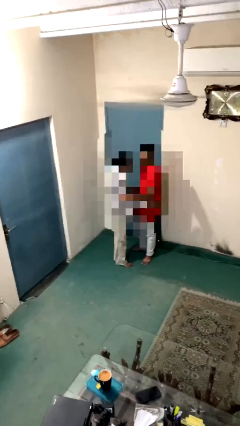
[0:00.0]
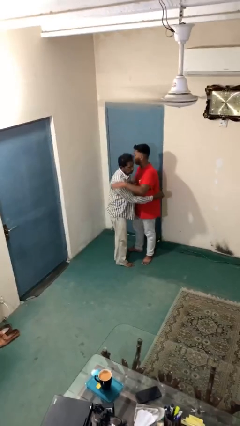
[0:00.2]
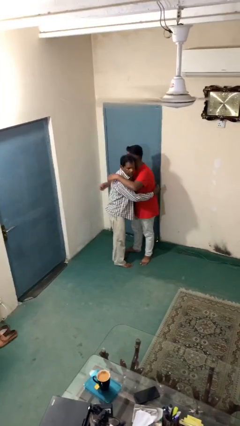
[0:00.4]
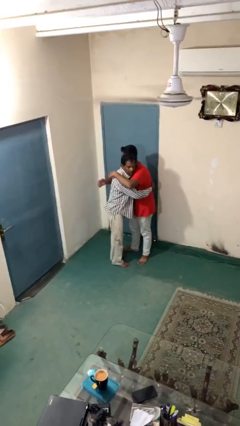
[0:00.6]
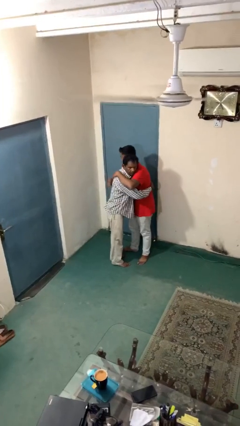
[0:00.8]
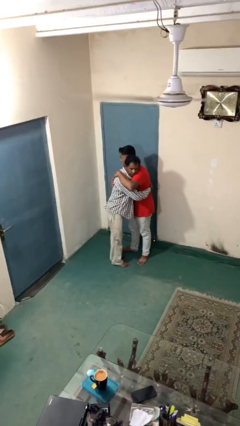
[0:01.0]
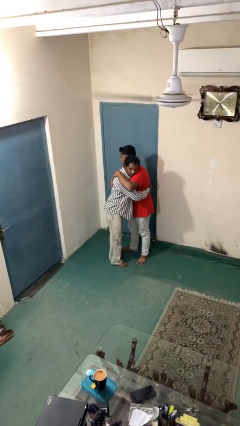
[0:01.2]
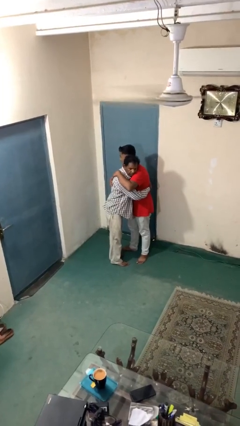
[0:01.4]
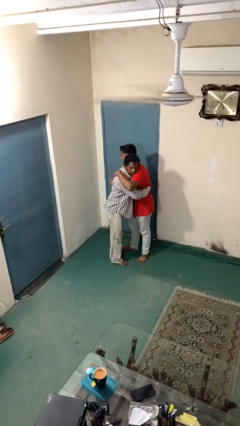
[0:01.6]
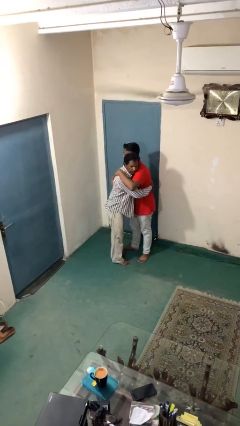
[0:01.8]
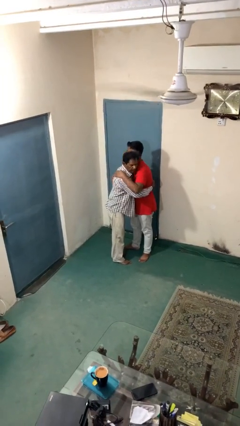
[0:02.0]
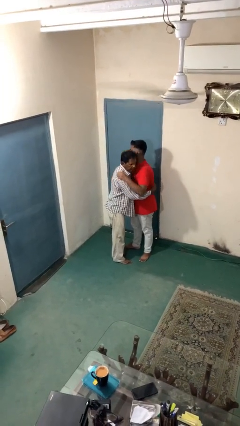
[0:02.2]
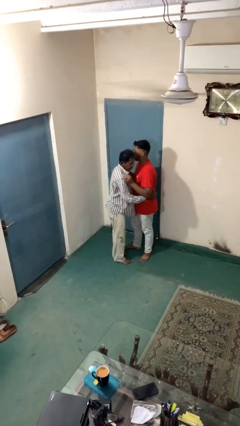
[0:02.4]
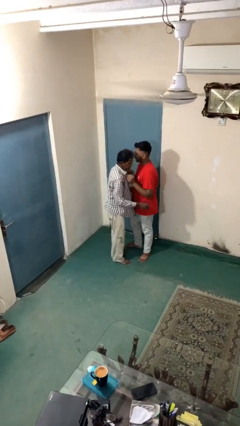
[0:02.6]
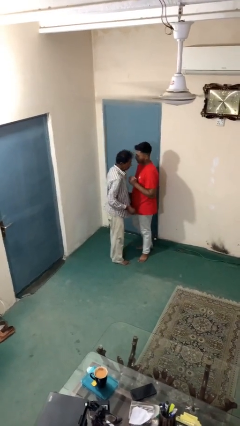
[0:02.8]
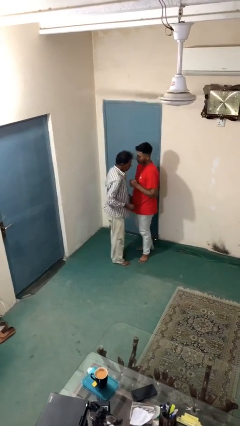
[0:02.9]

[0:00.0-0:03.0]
person embraces person

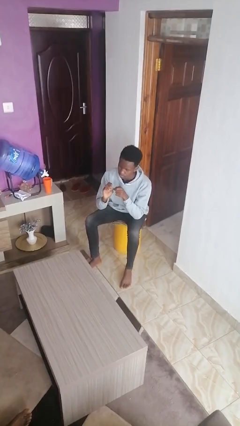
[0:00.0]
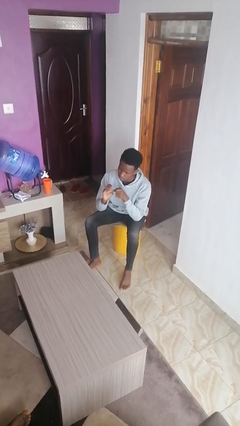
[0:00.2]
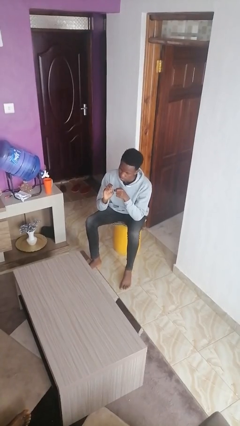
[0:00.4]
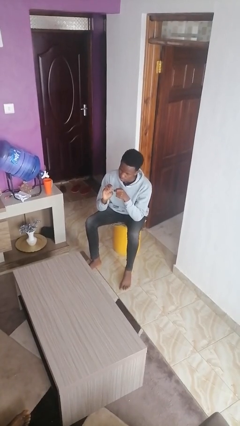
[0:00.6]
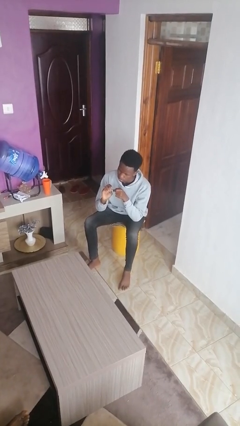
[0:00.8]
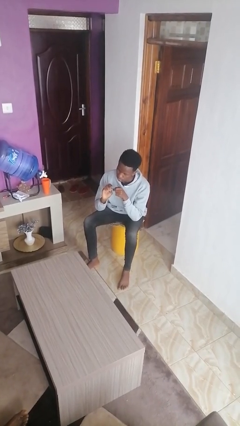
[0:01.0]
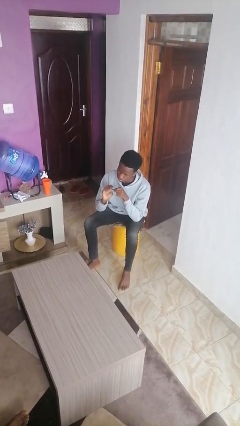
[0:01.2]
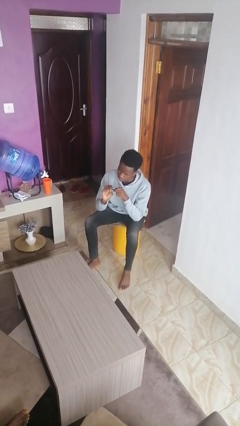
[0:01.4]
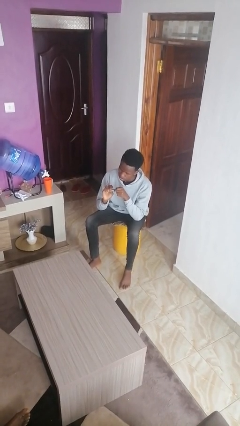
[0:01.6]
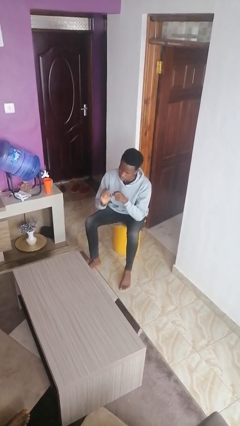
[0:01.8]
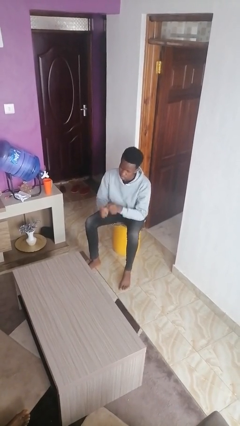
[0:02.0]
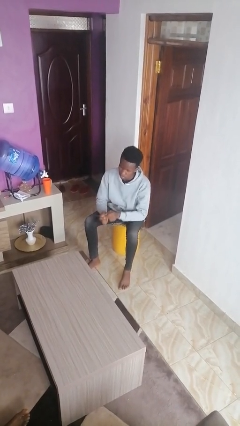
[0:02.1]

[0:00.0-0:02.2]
person files fingernails

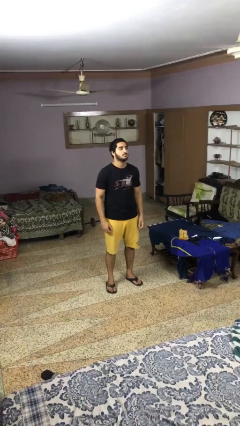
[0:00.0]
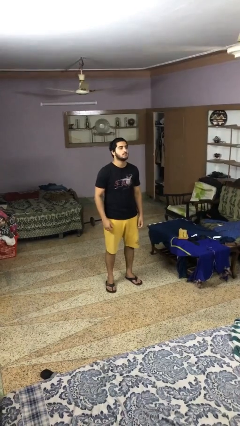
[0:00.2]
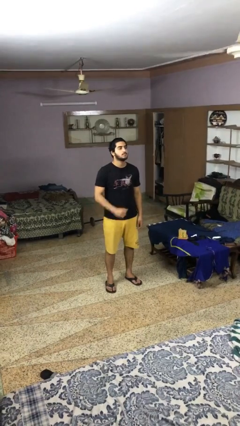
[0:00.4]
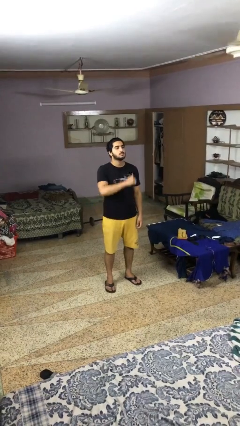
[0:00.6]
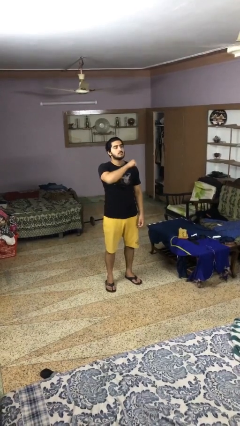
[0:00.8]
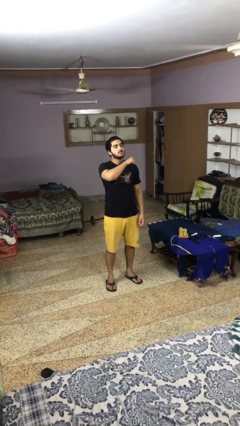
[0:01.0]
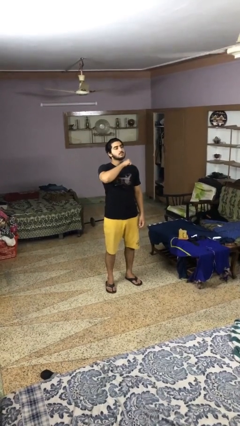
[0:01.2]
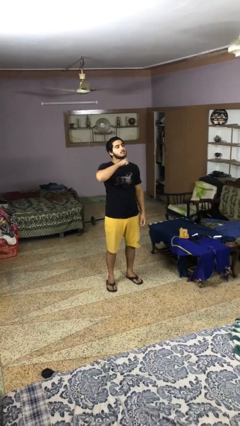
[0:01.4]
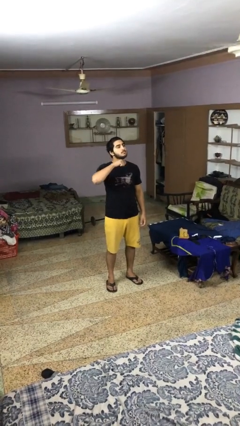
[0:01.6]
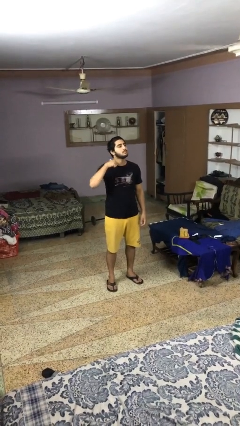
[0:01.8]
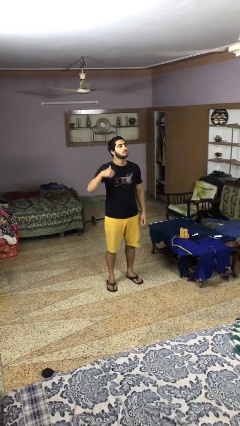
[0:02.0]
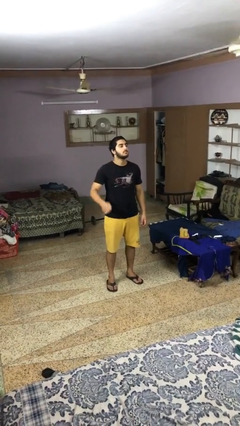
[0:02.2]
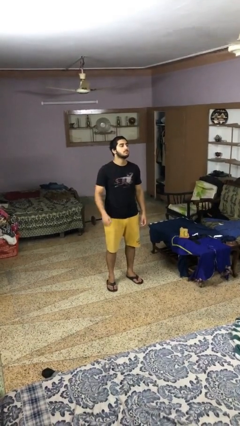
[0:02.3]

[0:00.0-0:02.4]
person gestures cut

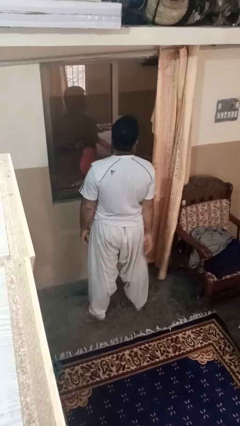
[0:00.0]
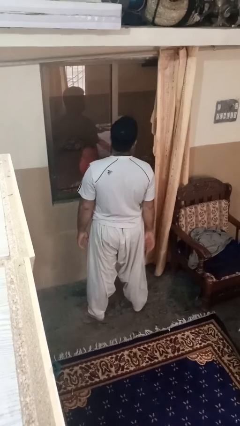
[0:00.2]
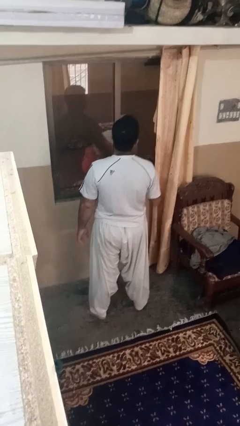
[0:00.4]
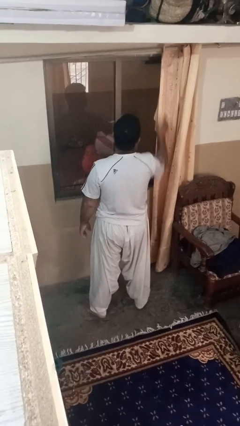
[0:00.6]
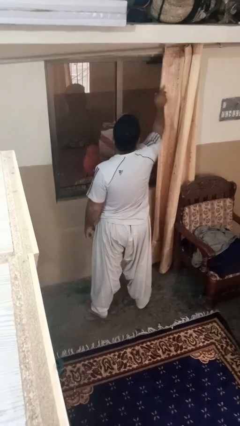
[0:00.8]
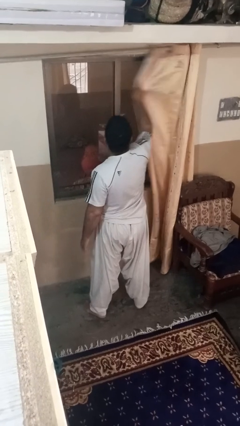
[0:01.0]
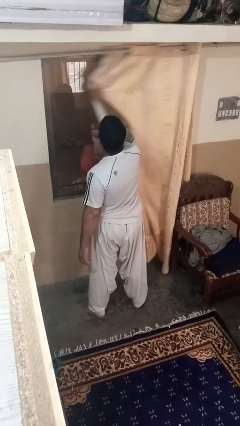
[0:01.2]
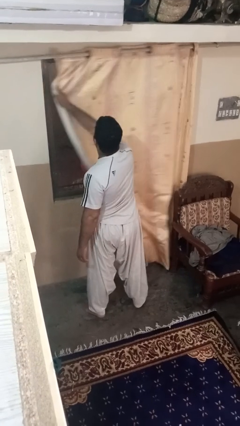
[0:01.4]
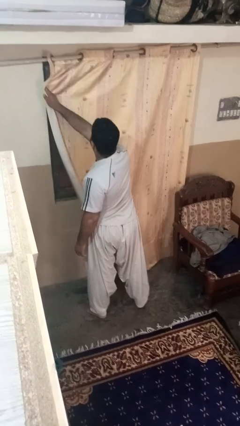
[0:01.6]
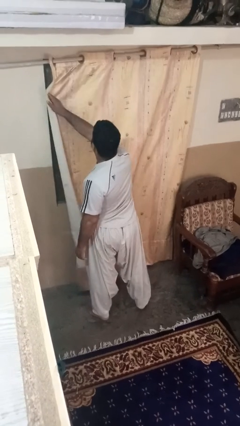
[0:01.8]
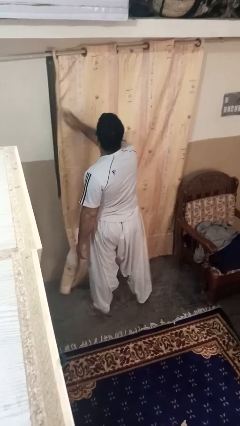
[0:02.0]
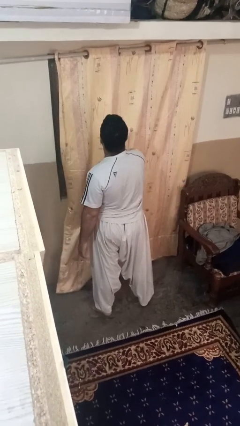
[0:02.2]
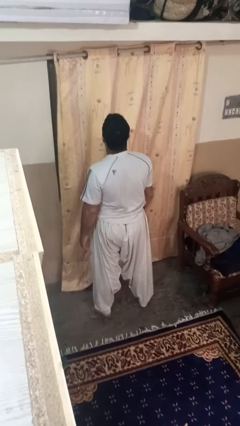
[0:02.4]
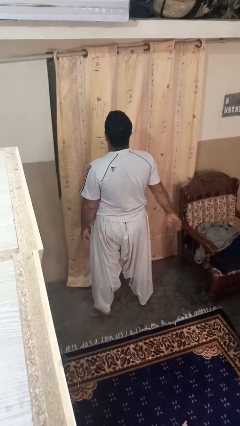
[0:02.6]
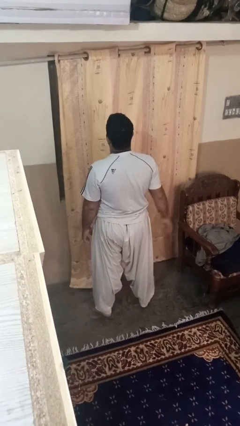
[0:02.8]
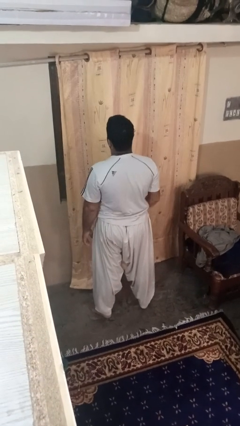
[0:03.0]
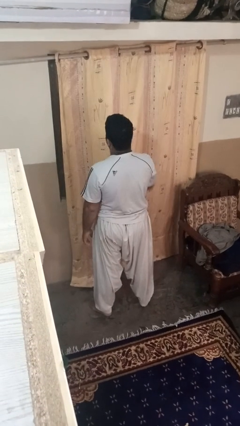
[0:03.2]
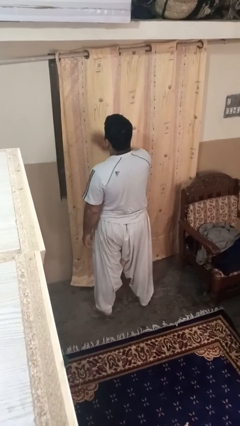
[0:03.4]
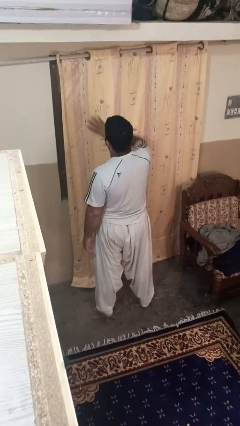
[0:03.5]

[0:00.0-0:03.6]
person closes curtains

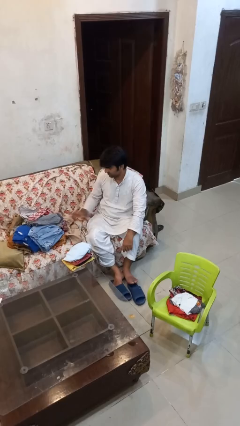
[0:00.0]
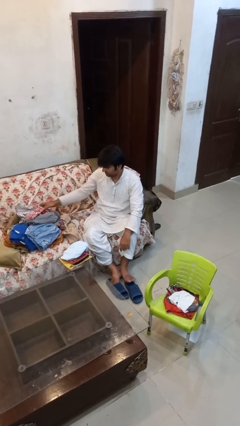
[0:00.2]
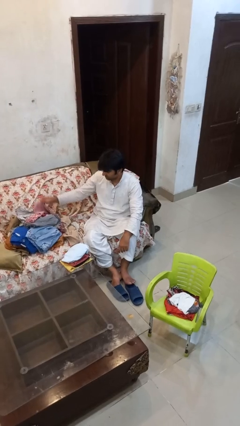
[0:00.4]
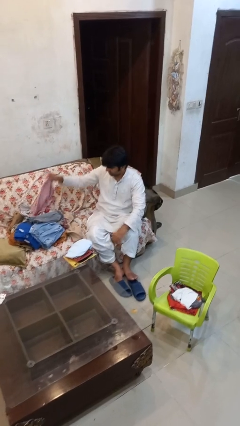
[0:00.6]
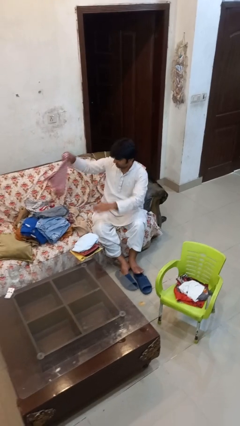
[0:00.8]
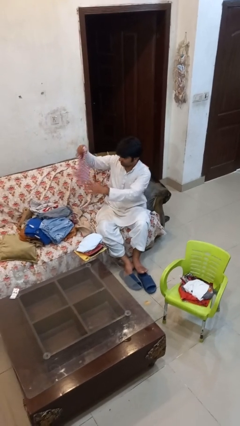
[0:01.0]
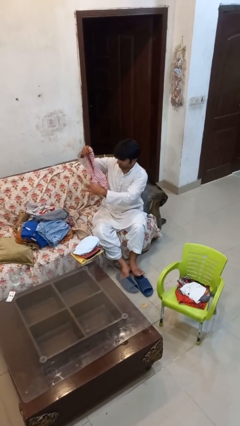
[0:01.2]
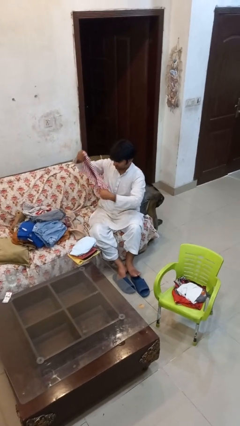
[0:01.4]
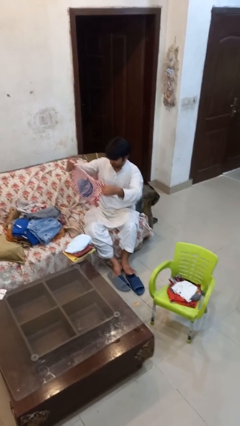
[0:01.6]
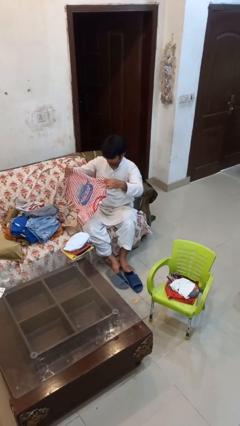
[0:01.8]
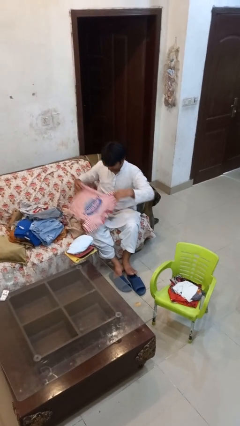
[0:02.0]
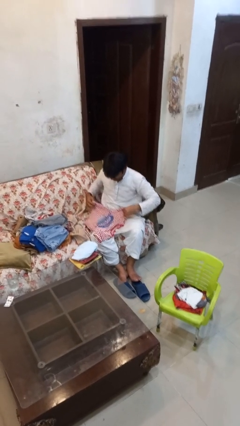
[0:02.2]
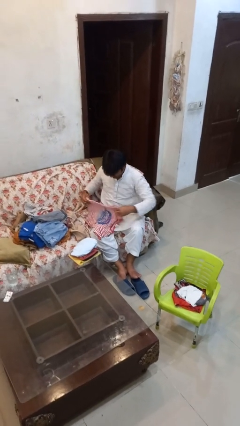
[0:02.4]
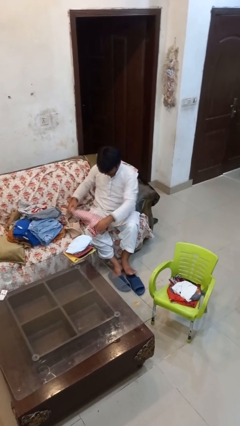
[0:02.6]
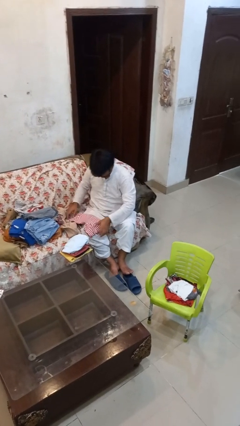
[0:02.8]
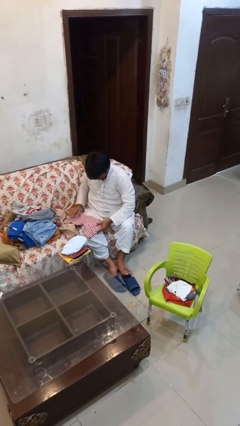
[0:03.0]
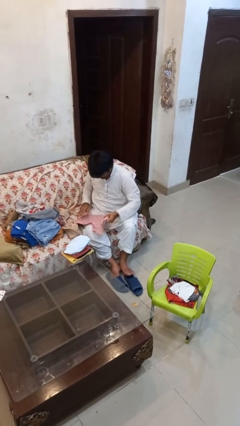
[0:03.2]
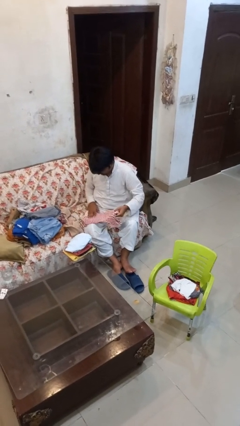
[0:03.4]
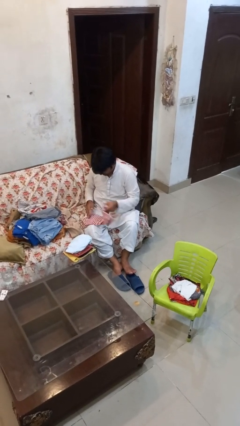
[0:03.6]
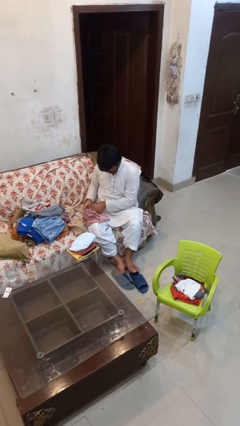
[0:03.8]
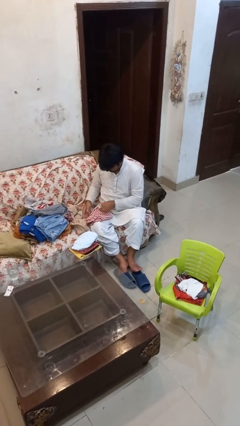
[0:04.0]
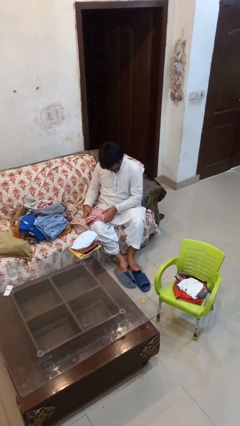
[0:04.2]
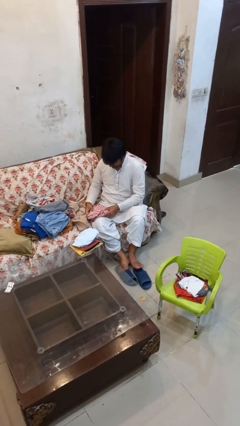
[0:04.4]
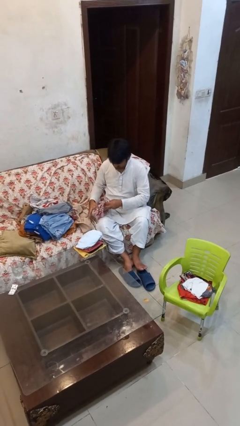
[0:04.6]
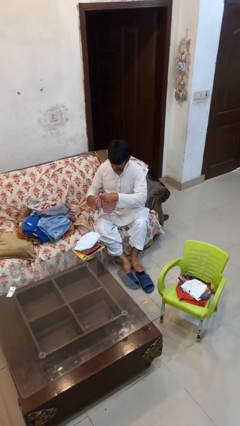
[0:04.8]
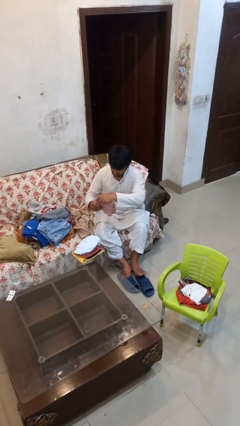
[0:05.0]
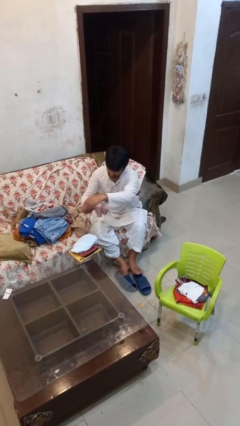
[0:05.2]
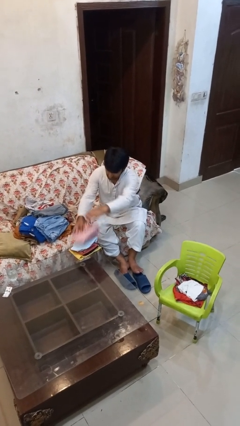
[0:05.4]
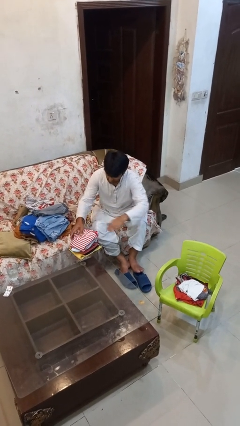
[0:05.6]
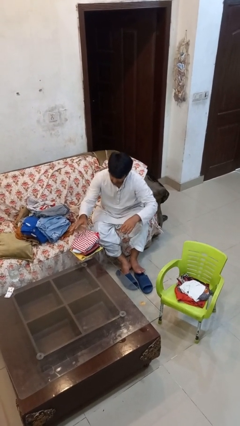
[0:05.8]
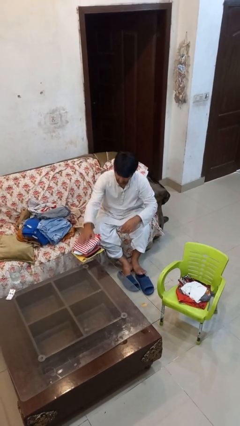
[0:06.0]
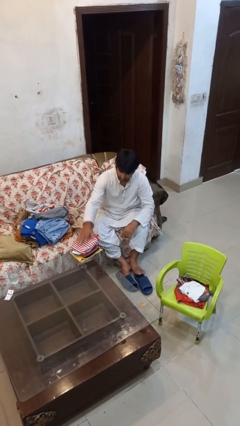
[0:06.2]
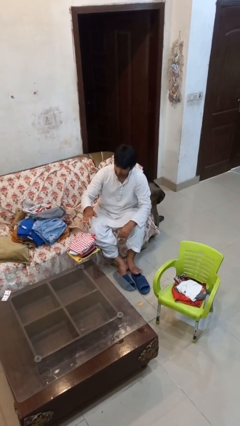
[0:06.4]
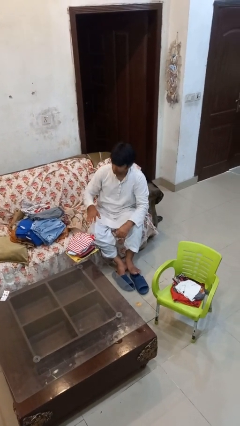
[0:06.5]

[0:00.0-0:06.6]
person folds shirt
